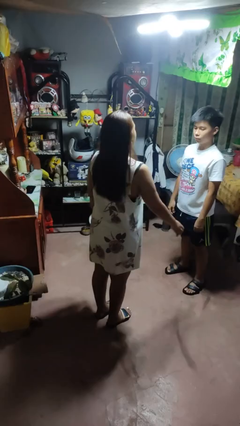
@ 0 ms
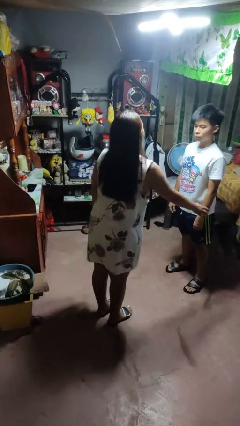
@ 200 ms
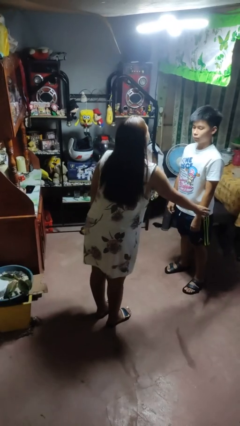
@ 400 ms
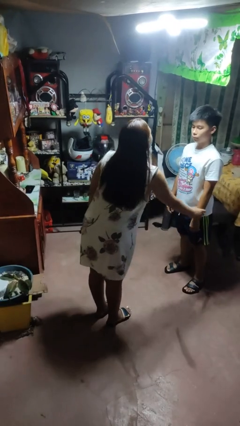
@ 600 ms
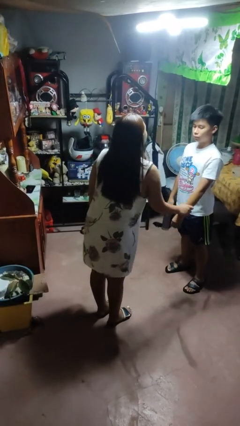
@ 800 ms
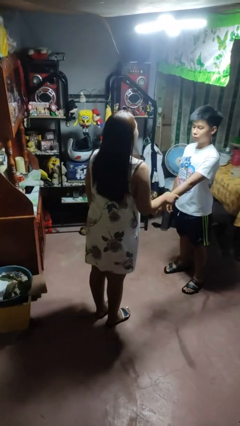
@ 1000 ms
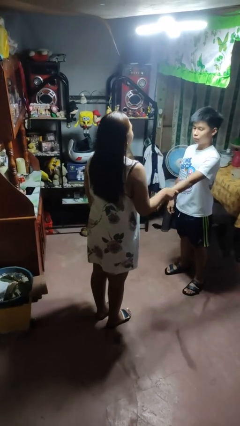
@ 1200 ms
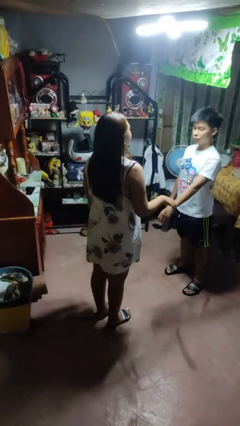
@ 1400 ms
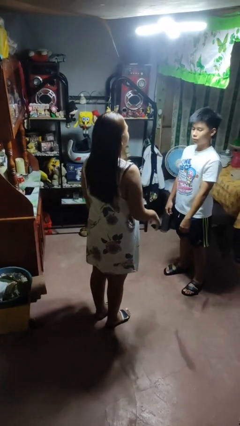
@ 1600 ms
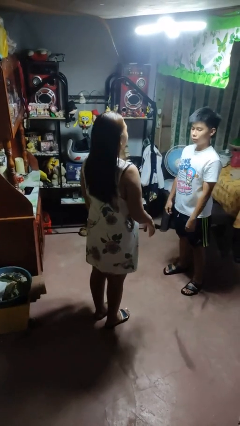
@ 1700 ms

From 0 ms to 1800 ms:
person grabs person by forearm

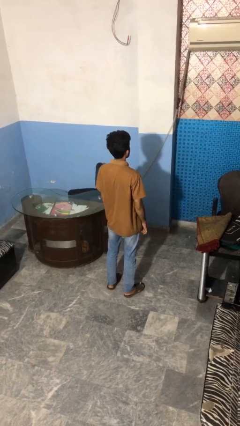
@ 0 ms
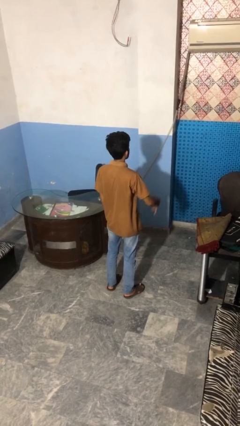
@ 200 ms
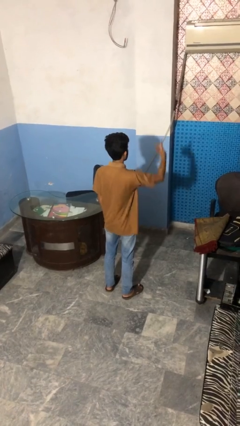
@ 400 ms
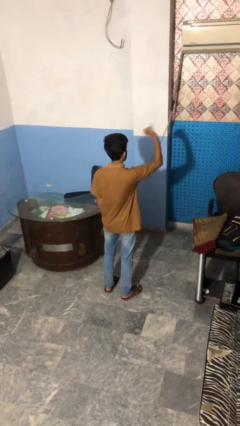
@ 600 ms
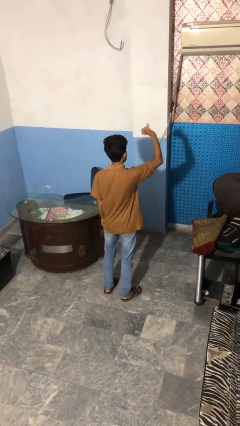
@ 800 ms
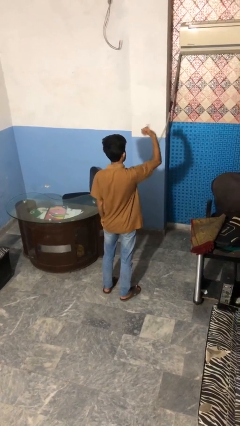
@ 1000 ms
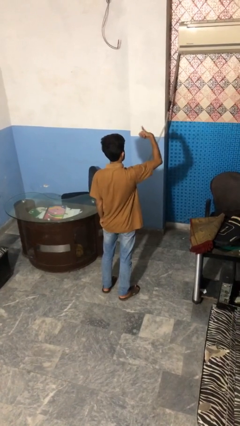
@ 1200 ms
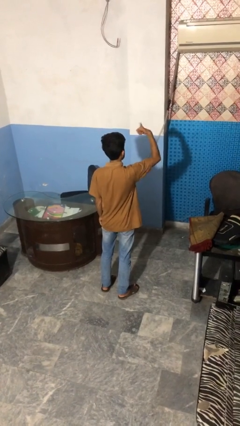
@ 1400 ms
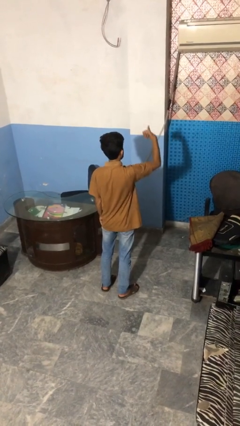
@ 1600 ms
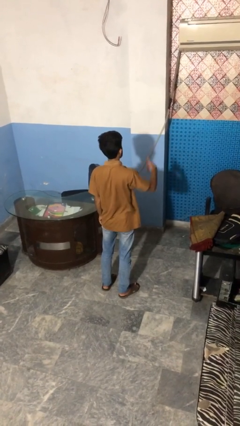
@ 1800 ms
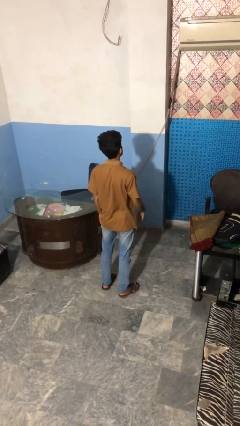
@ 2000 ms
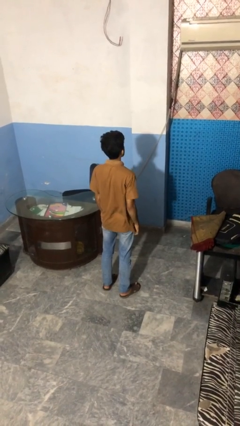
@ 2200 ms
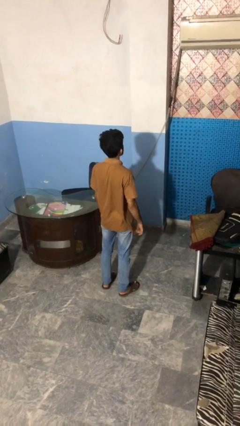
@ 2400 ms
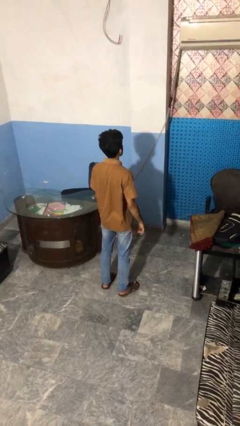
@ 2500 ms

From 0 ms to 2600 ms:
person gestures hang loose

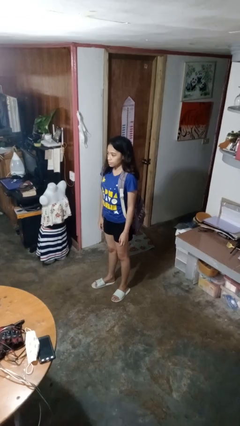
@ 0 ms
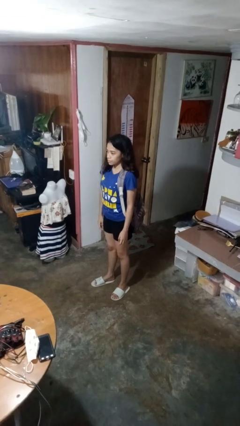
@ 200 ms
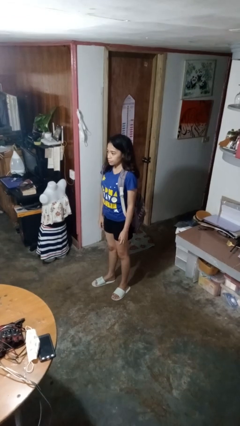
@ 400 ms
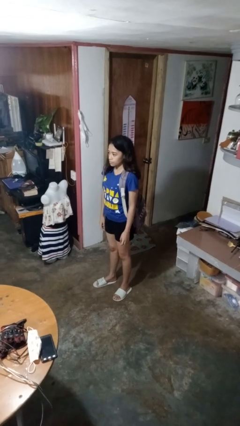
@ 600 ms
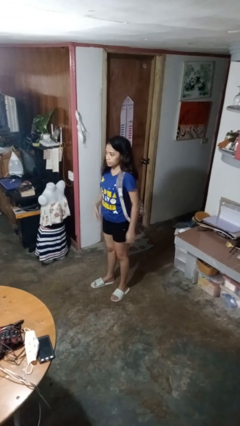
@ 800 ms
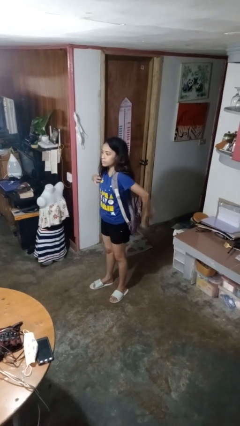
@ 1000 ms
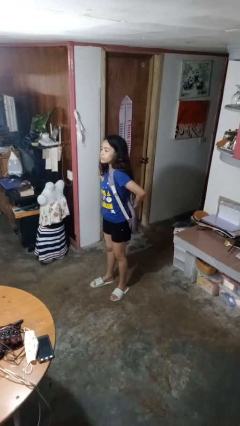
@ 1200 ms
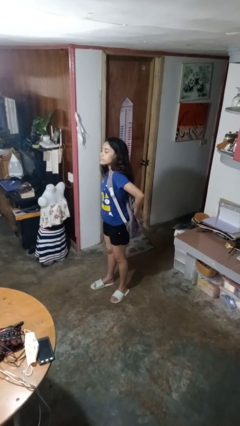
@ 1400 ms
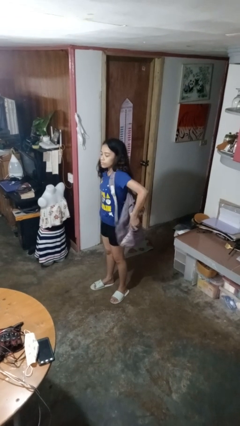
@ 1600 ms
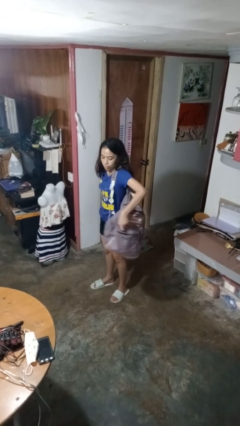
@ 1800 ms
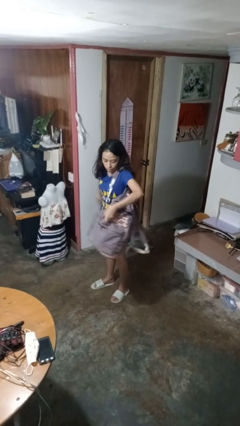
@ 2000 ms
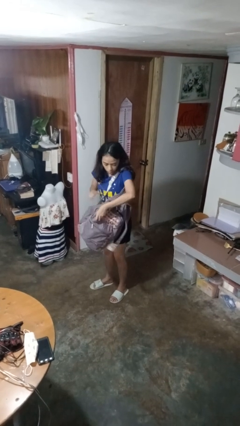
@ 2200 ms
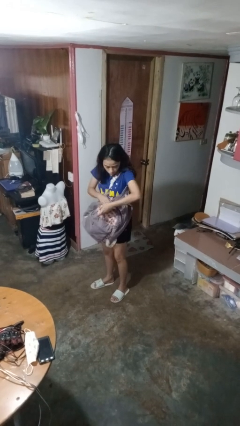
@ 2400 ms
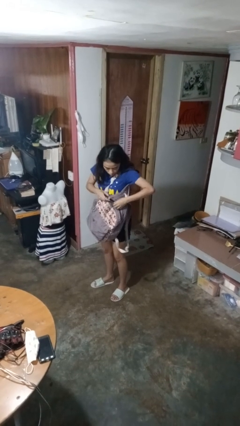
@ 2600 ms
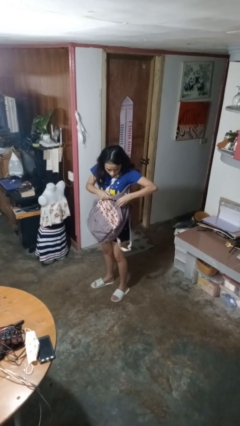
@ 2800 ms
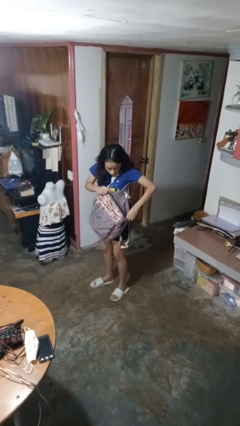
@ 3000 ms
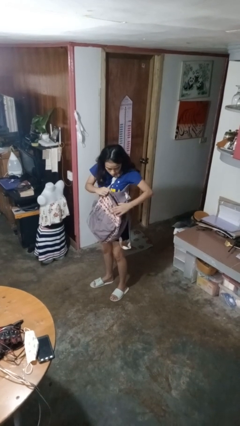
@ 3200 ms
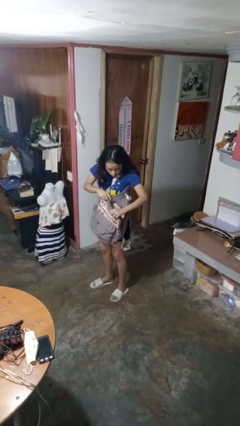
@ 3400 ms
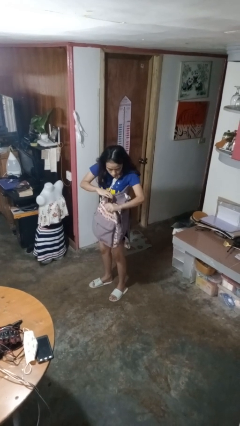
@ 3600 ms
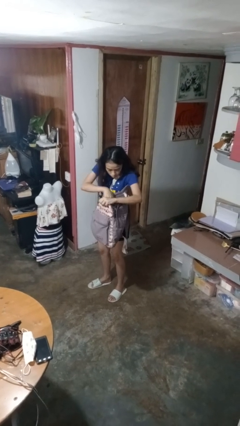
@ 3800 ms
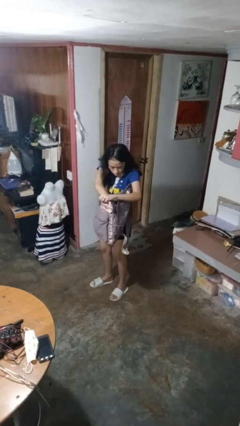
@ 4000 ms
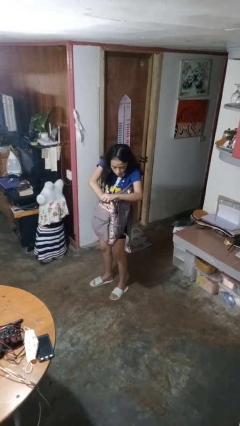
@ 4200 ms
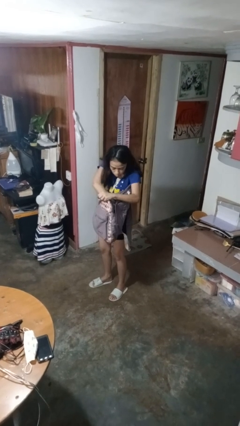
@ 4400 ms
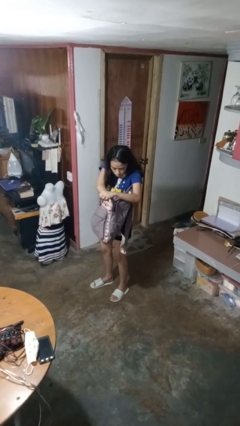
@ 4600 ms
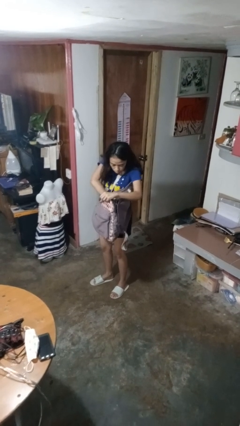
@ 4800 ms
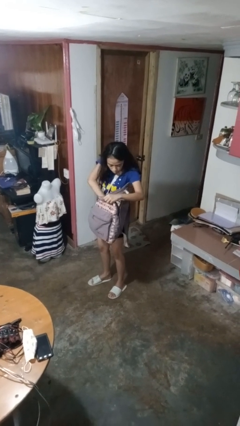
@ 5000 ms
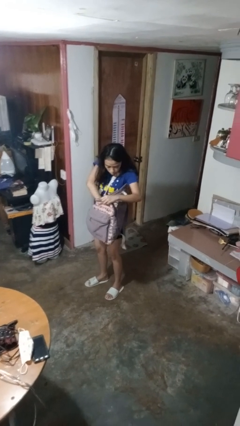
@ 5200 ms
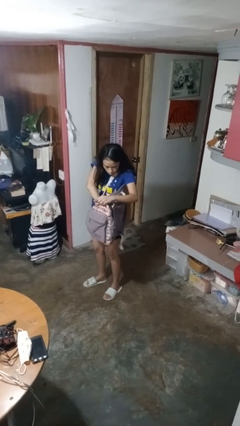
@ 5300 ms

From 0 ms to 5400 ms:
person searches in backpack

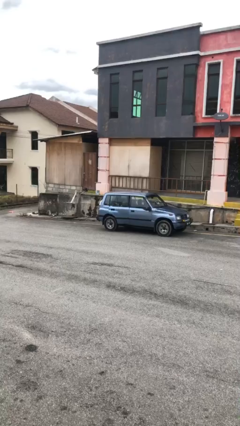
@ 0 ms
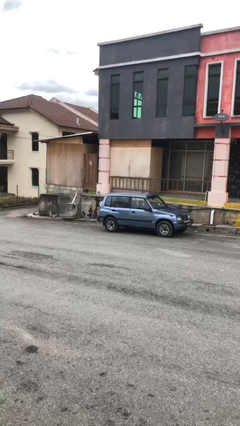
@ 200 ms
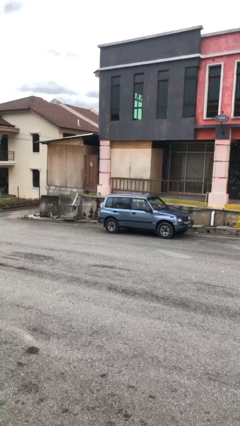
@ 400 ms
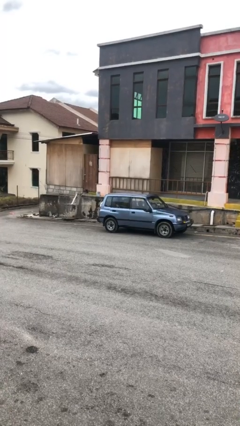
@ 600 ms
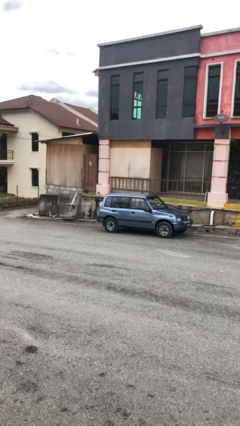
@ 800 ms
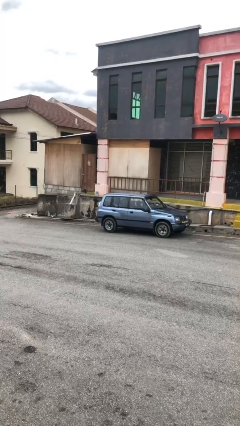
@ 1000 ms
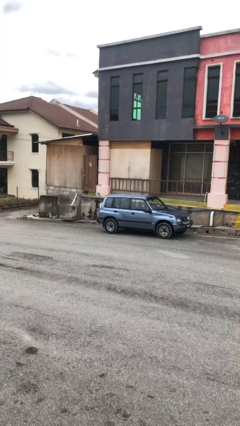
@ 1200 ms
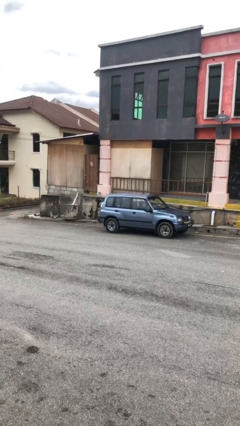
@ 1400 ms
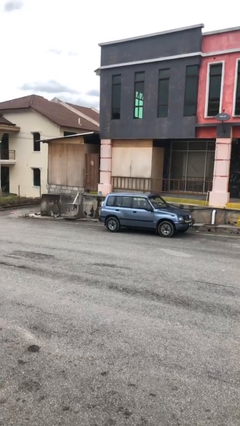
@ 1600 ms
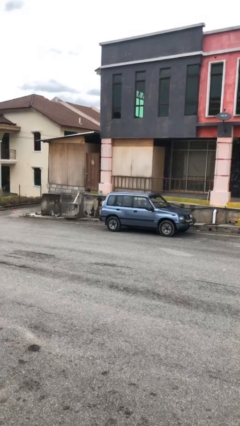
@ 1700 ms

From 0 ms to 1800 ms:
person closes car door

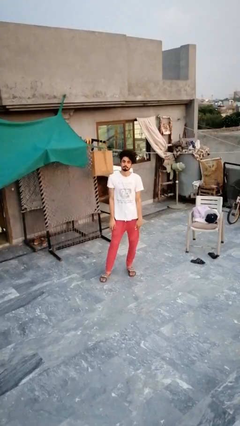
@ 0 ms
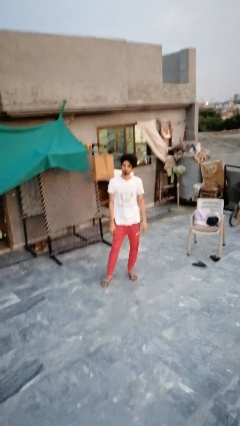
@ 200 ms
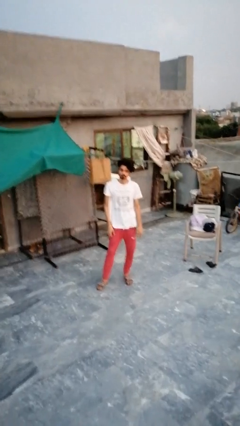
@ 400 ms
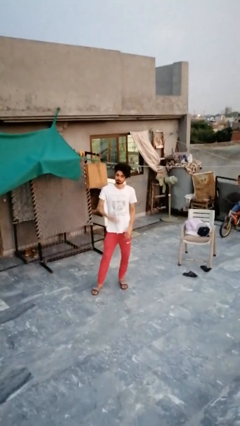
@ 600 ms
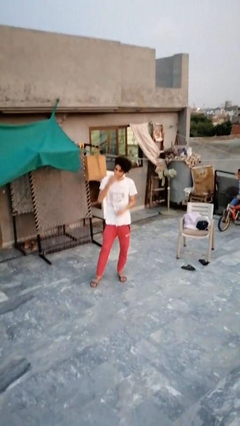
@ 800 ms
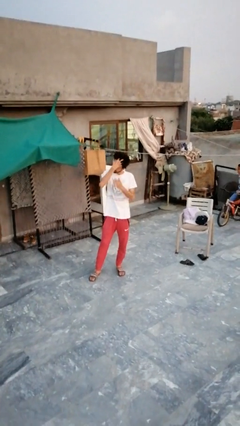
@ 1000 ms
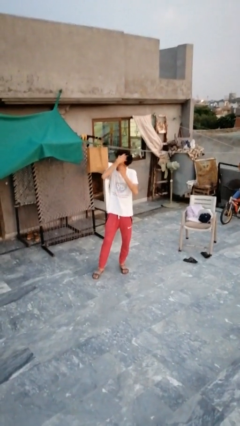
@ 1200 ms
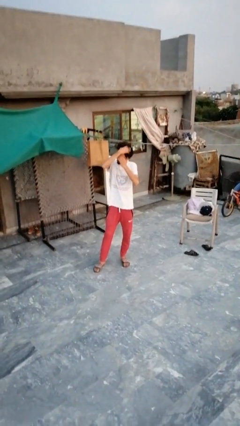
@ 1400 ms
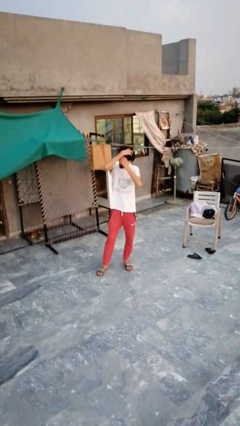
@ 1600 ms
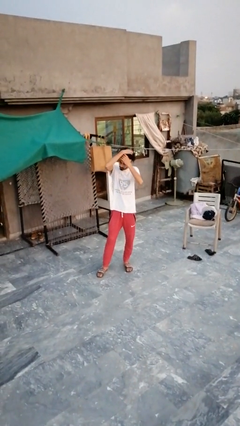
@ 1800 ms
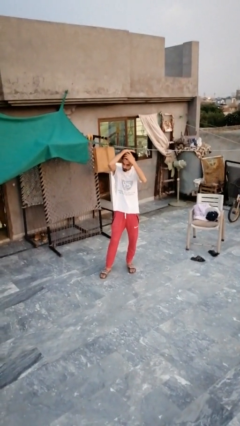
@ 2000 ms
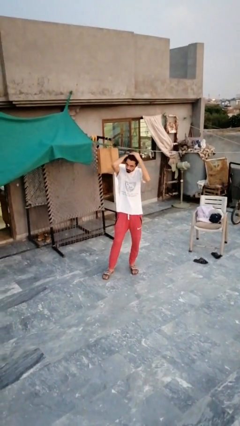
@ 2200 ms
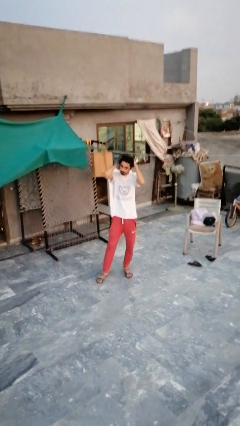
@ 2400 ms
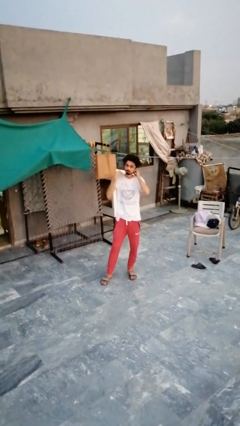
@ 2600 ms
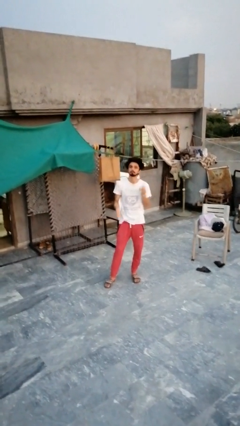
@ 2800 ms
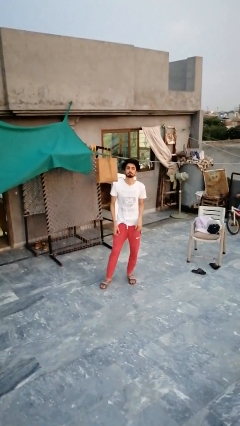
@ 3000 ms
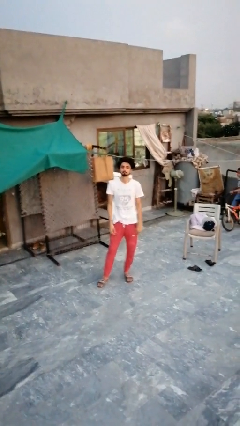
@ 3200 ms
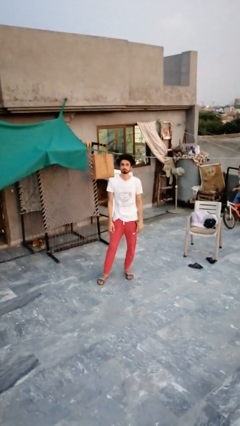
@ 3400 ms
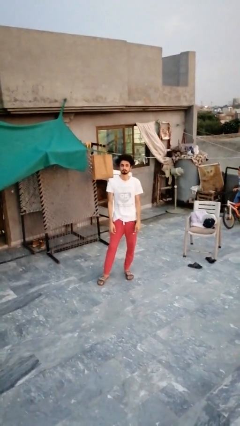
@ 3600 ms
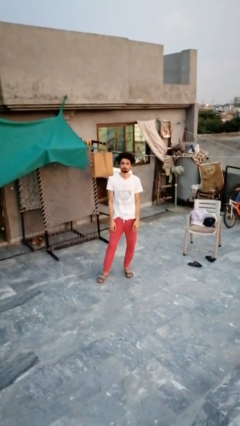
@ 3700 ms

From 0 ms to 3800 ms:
person strokes hair

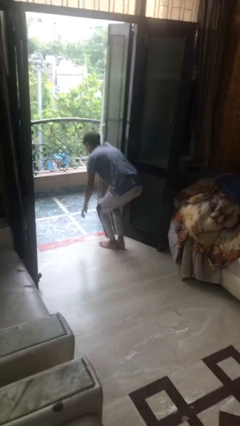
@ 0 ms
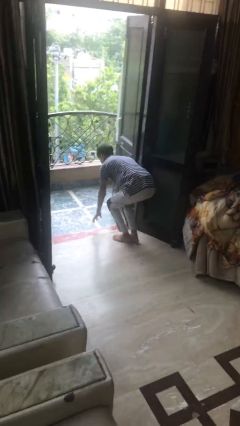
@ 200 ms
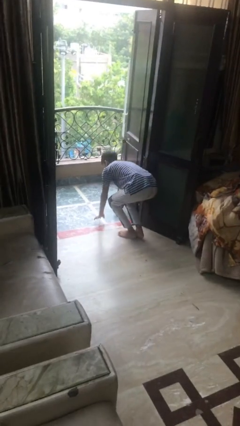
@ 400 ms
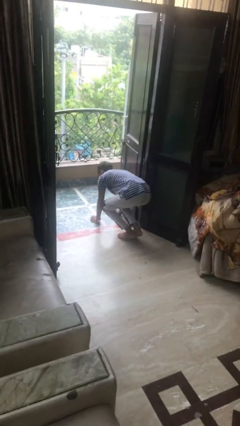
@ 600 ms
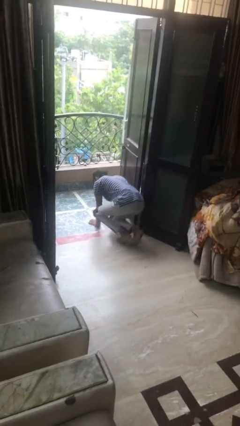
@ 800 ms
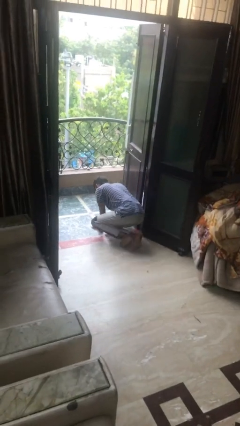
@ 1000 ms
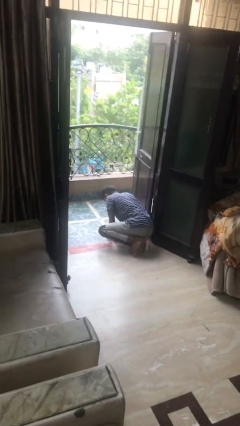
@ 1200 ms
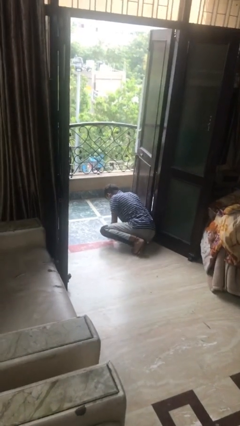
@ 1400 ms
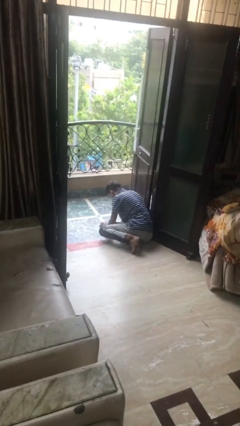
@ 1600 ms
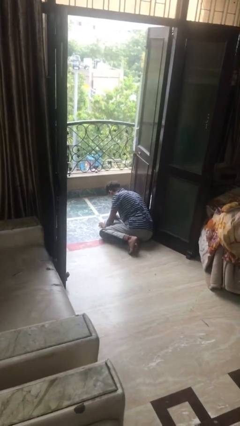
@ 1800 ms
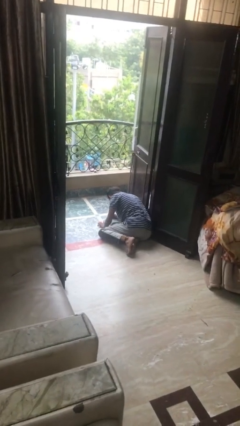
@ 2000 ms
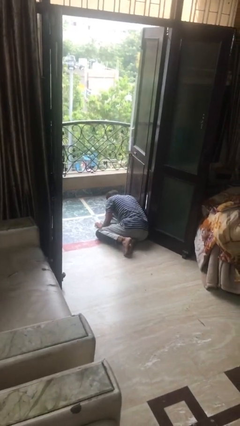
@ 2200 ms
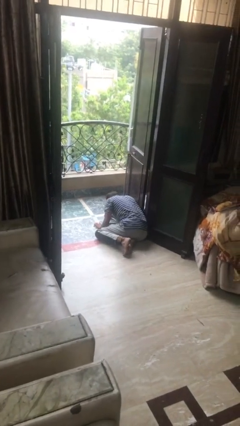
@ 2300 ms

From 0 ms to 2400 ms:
person lies down on floor
